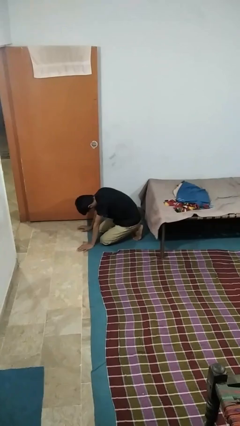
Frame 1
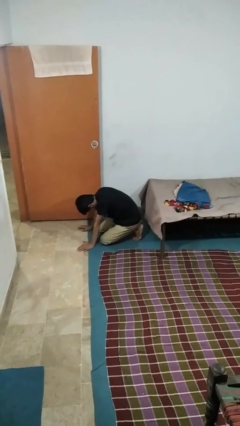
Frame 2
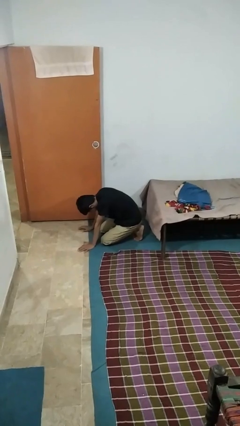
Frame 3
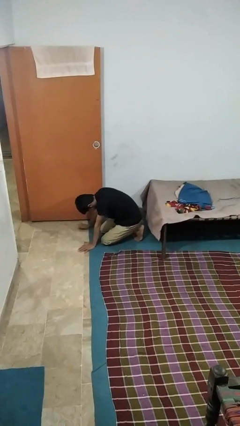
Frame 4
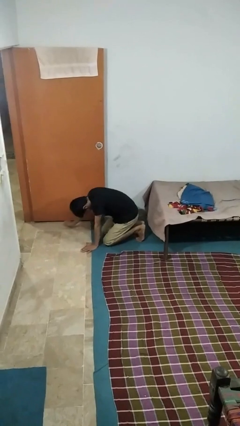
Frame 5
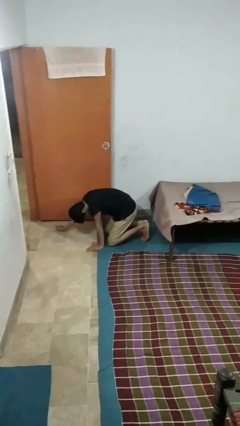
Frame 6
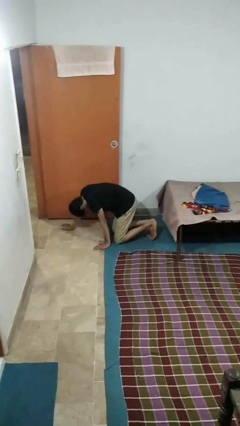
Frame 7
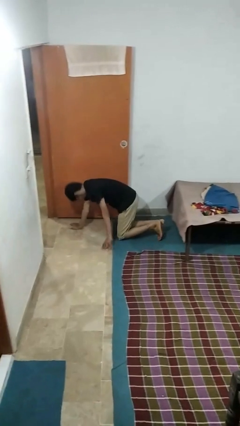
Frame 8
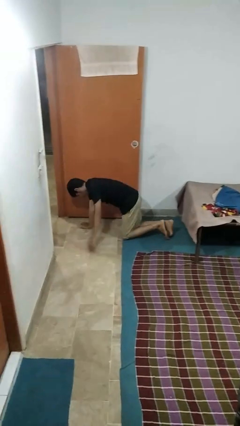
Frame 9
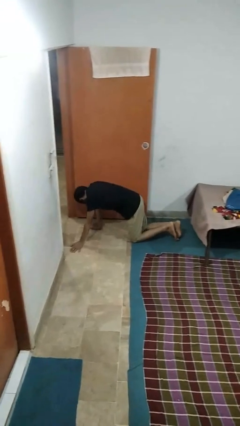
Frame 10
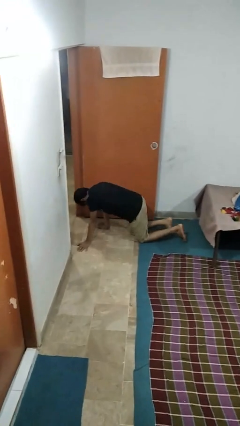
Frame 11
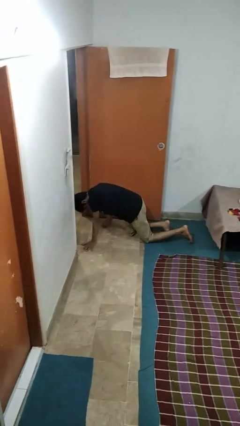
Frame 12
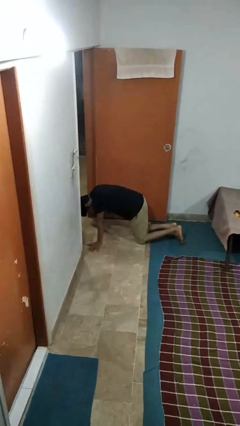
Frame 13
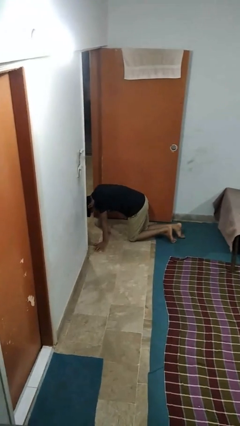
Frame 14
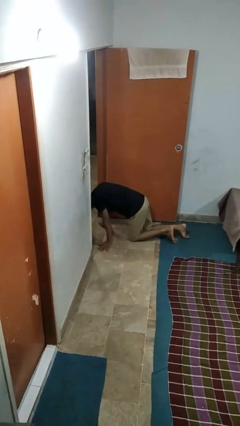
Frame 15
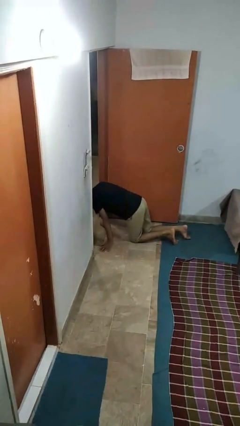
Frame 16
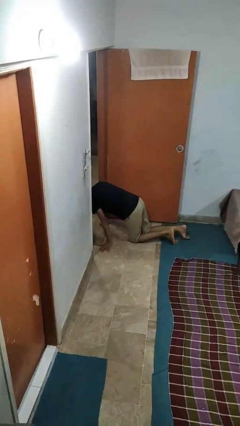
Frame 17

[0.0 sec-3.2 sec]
person crawls

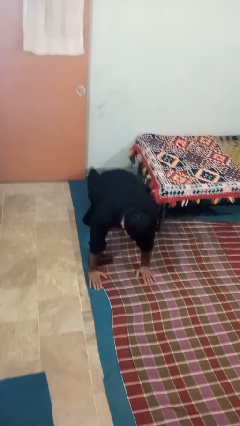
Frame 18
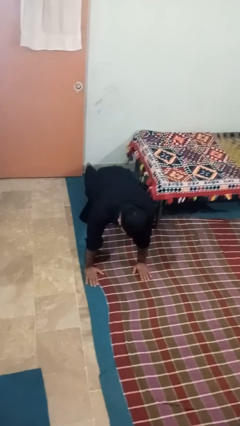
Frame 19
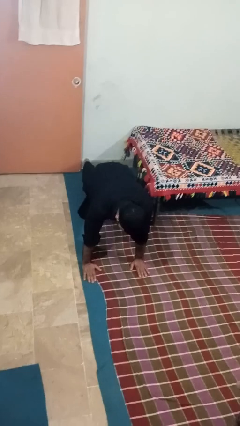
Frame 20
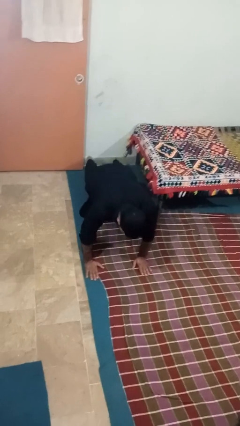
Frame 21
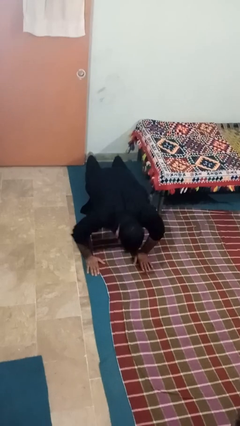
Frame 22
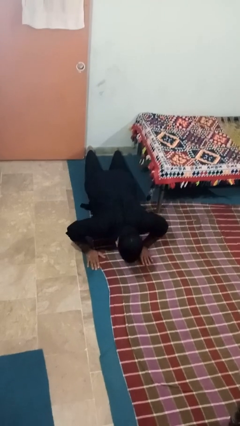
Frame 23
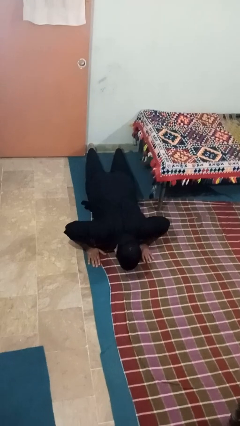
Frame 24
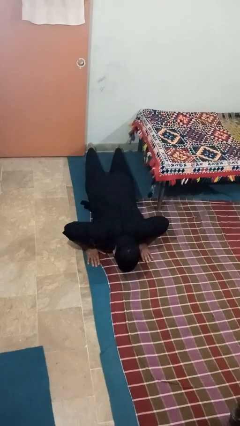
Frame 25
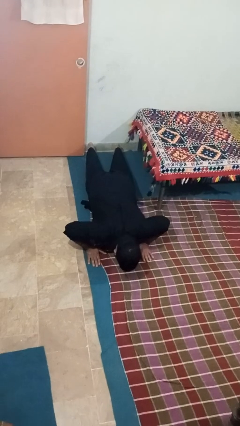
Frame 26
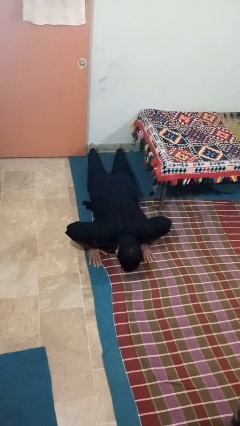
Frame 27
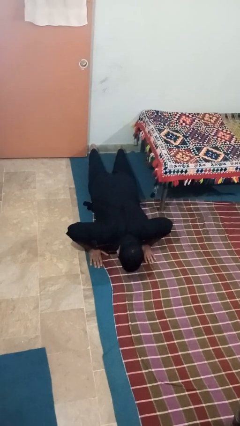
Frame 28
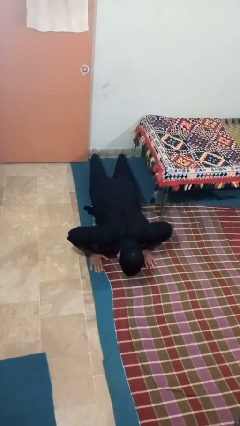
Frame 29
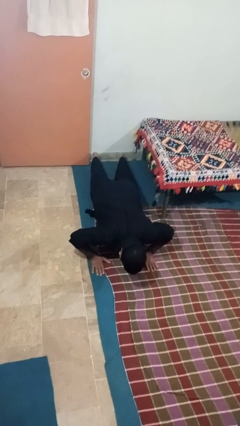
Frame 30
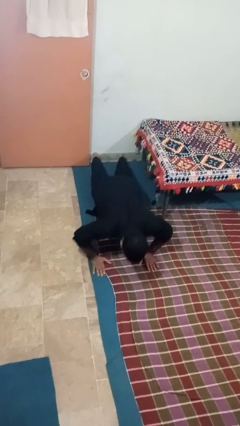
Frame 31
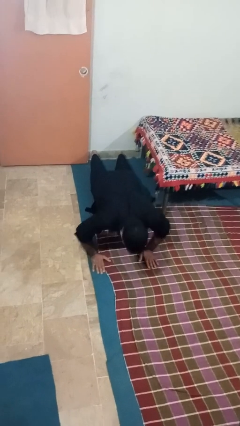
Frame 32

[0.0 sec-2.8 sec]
person exercises with pushup

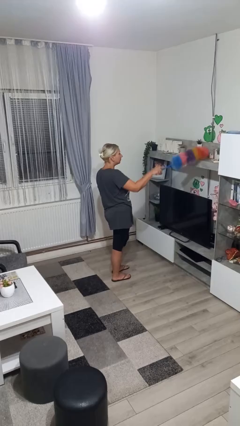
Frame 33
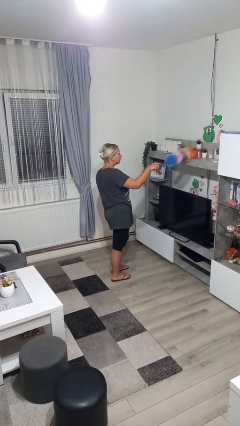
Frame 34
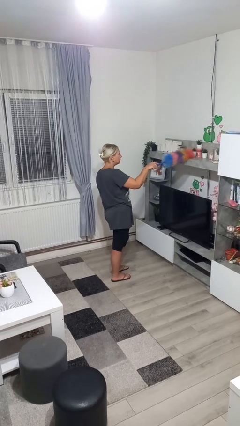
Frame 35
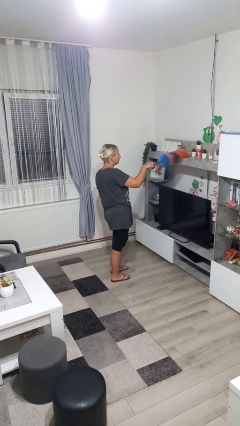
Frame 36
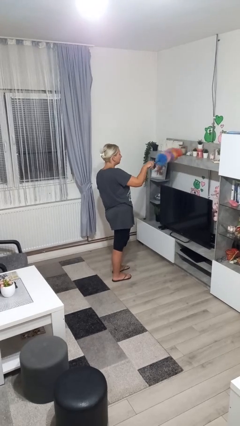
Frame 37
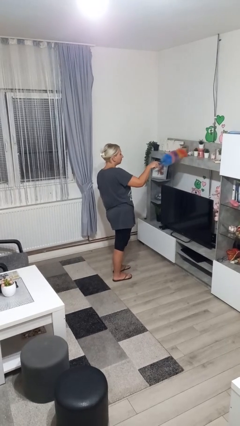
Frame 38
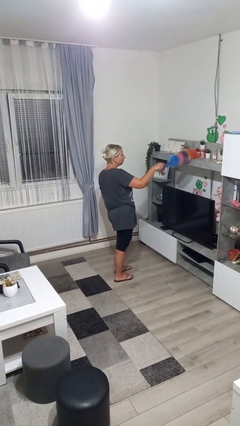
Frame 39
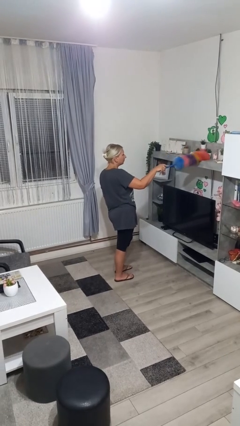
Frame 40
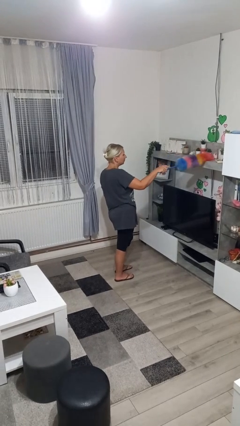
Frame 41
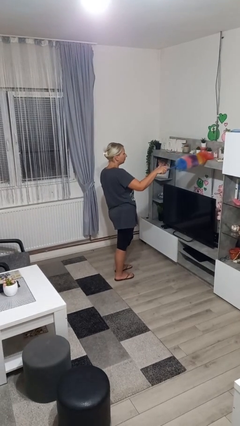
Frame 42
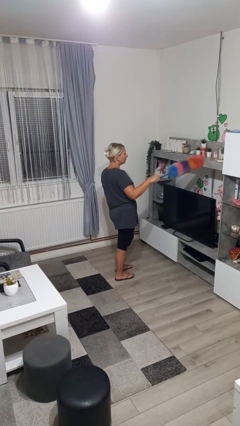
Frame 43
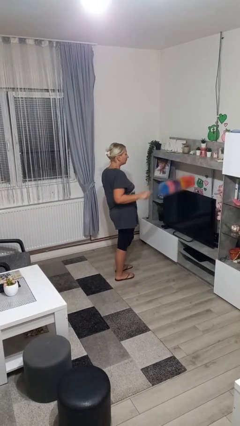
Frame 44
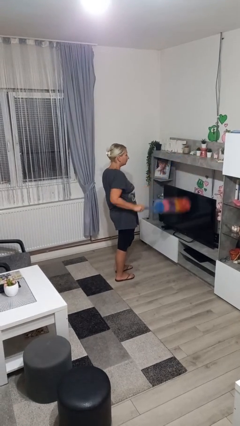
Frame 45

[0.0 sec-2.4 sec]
person dusts furniture

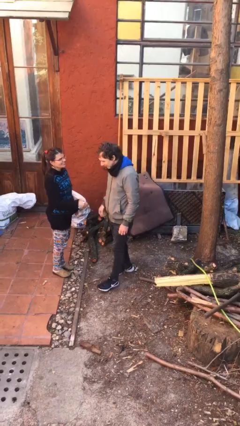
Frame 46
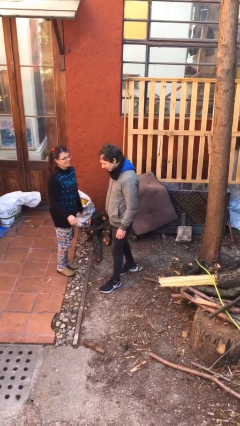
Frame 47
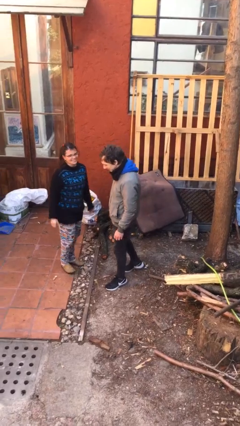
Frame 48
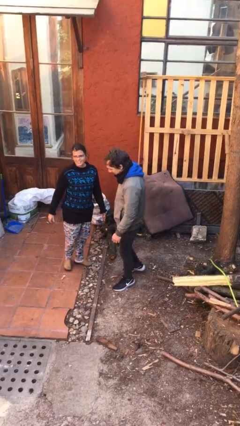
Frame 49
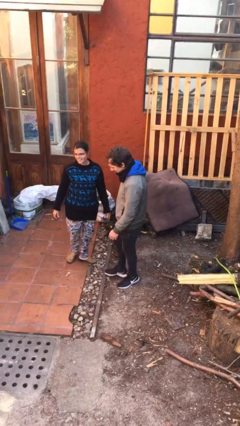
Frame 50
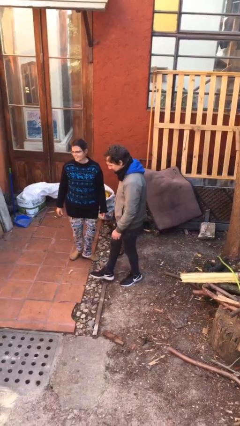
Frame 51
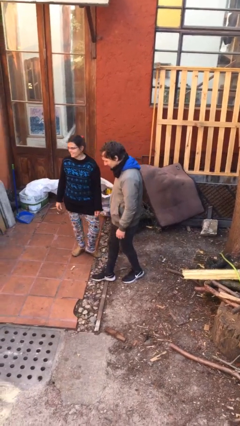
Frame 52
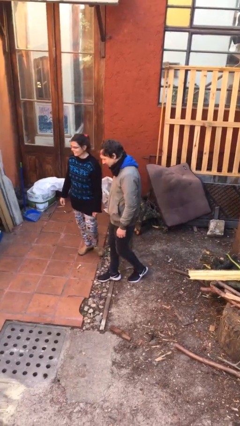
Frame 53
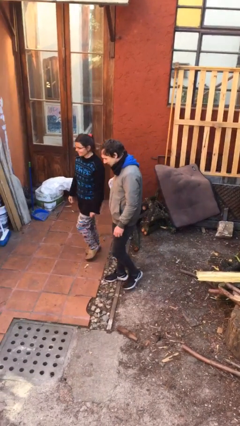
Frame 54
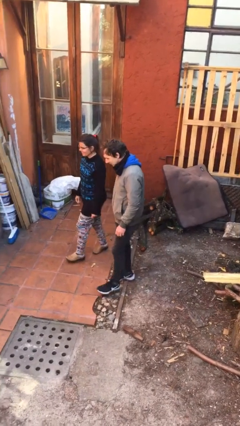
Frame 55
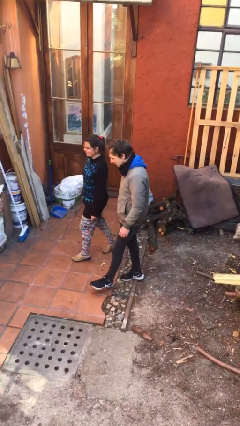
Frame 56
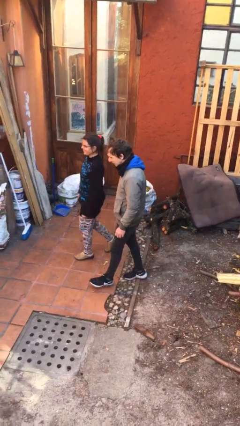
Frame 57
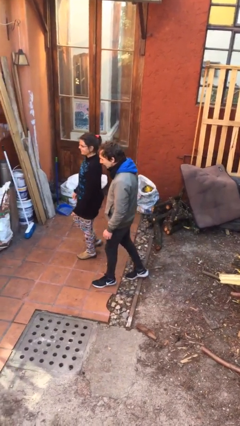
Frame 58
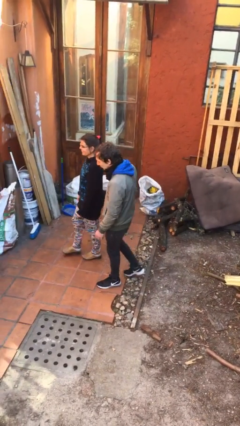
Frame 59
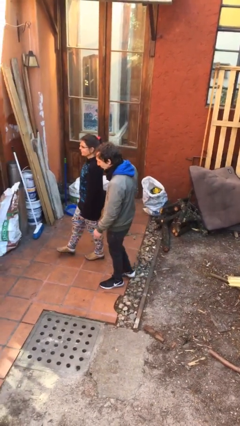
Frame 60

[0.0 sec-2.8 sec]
person talks to person

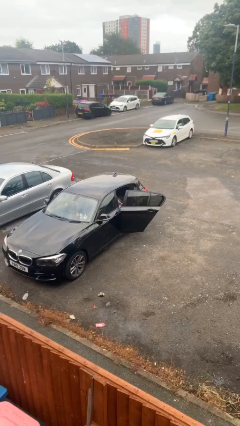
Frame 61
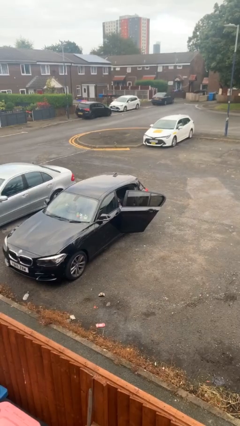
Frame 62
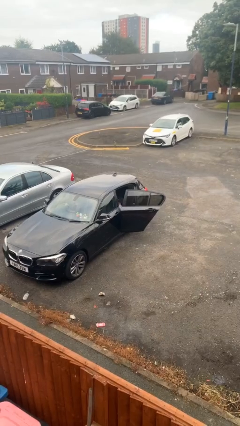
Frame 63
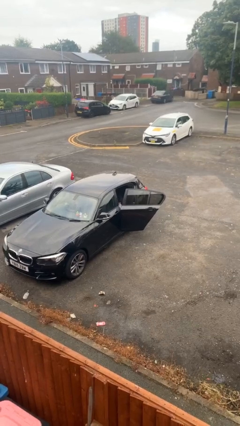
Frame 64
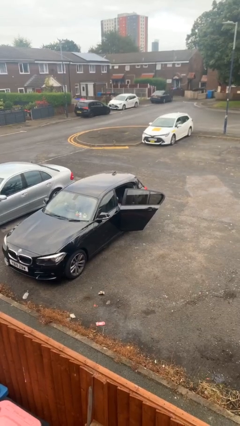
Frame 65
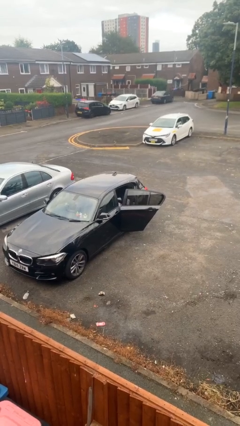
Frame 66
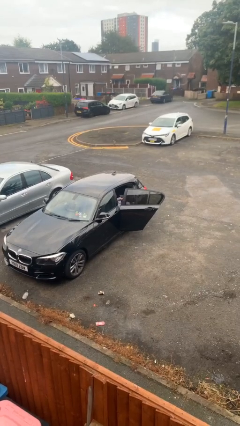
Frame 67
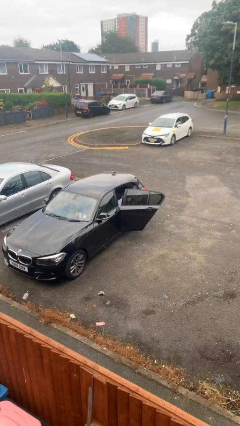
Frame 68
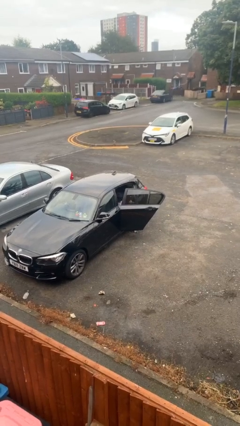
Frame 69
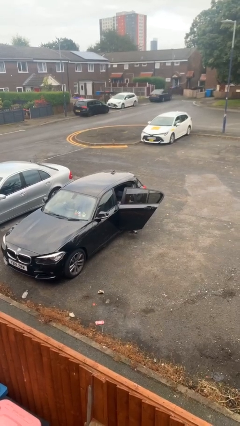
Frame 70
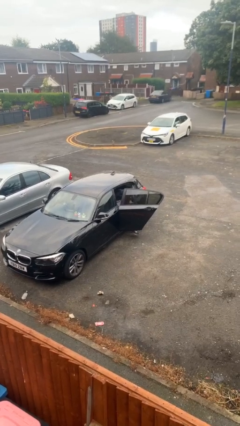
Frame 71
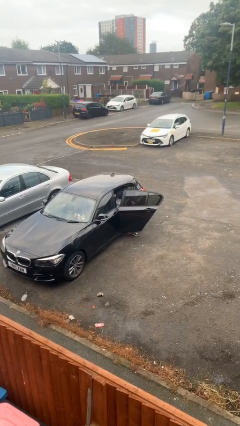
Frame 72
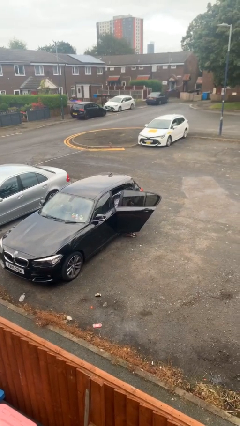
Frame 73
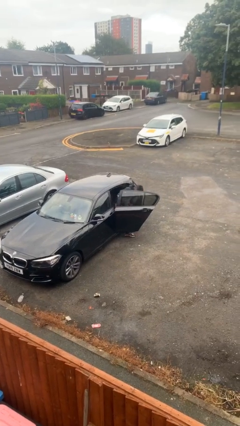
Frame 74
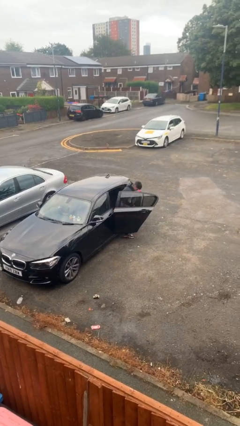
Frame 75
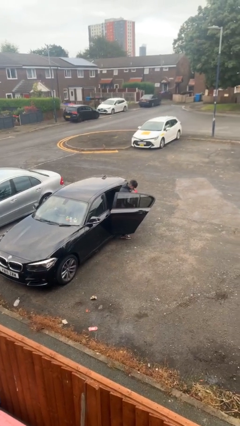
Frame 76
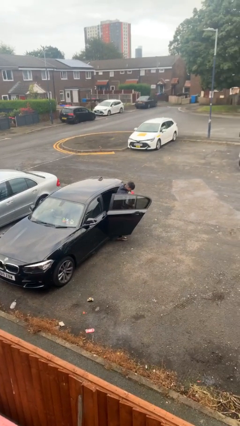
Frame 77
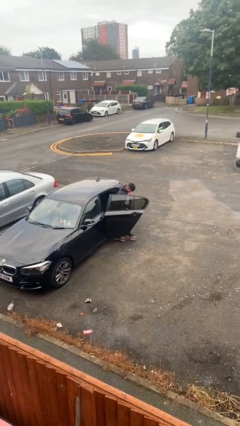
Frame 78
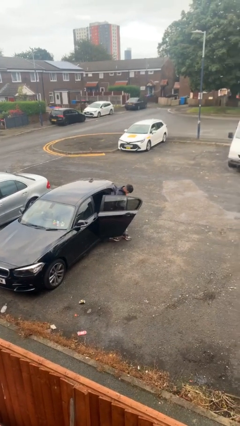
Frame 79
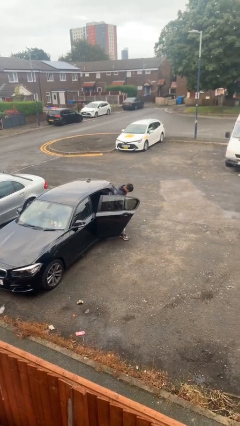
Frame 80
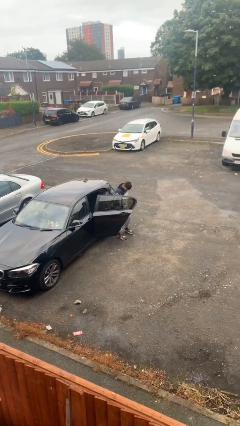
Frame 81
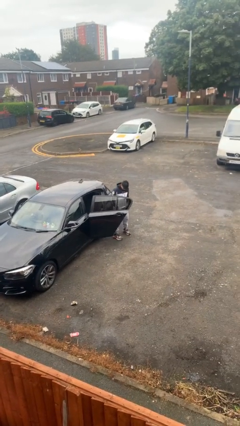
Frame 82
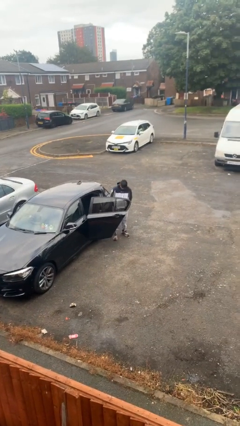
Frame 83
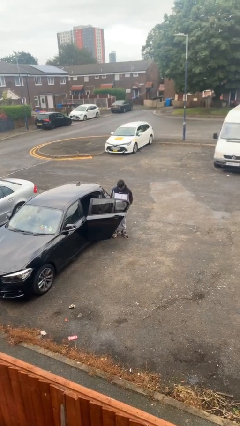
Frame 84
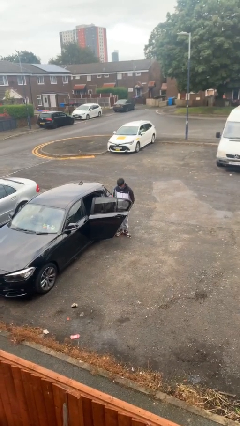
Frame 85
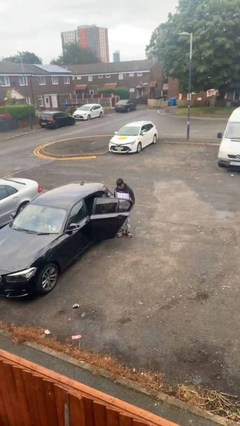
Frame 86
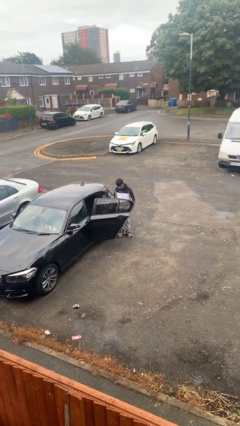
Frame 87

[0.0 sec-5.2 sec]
person exits car

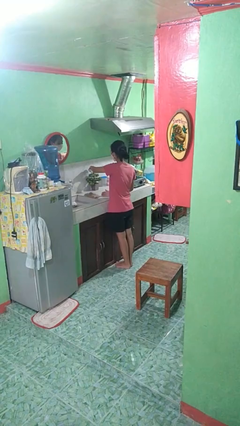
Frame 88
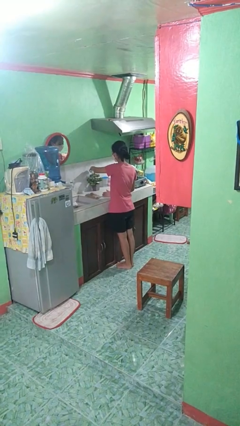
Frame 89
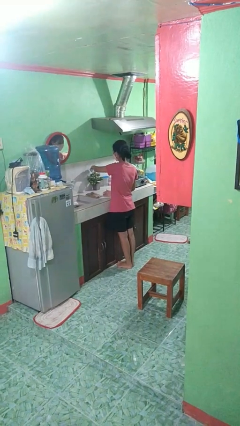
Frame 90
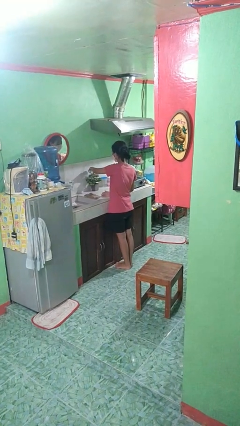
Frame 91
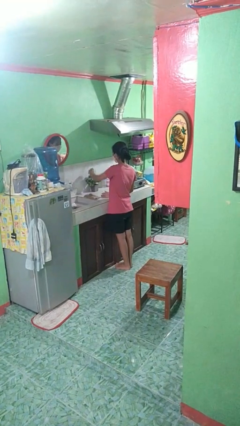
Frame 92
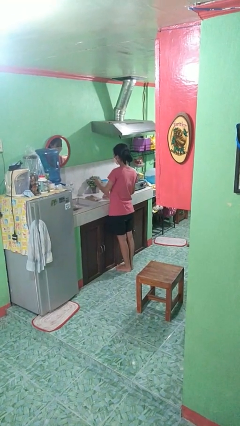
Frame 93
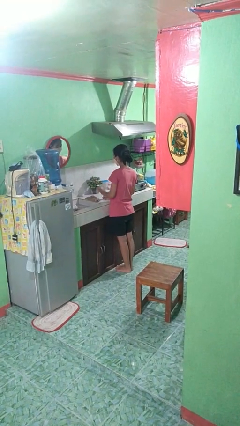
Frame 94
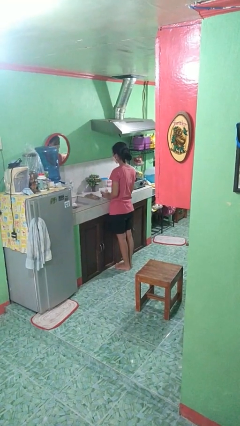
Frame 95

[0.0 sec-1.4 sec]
person waters houseplant
